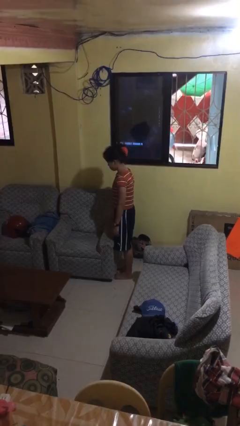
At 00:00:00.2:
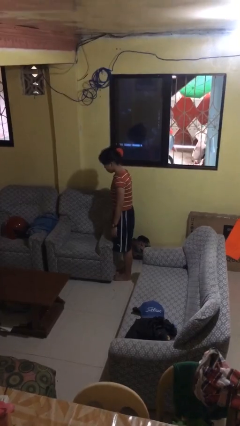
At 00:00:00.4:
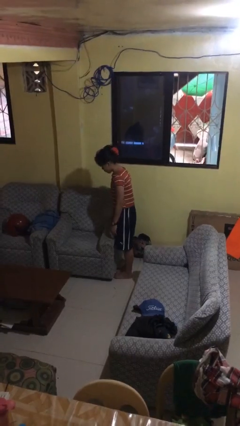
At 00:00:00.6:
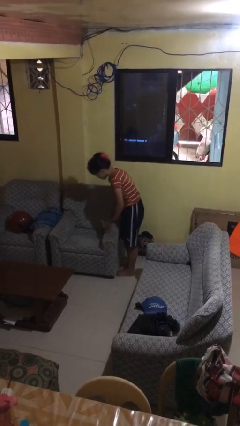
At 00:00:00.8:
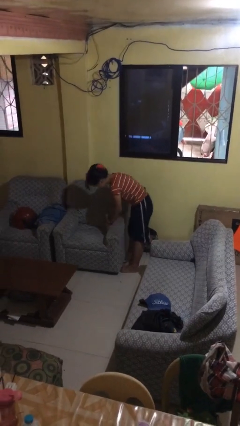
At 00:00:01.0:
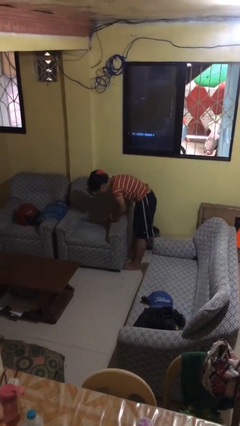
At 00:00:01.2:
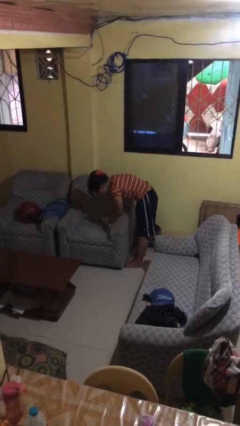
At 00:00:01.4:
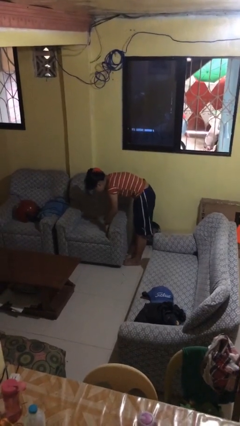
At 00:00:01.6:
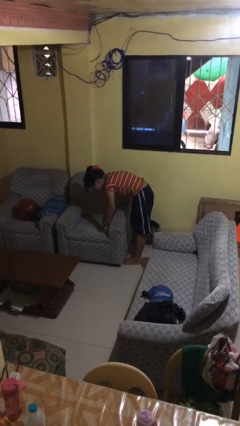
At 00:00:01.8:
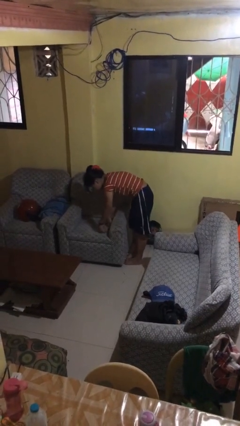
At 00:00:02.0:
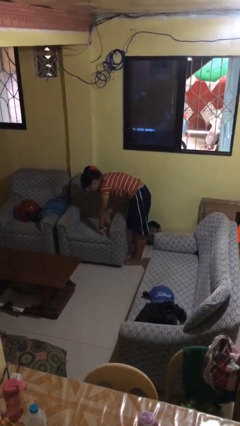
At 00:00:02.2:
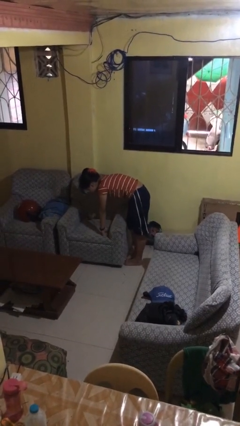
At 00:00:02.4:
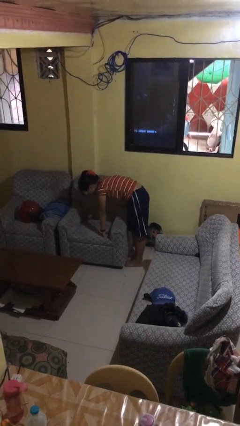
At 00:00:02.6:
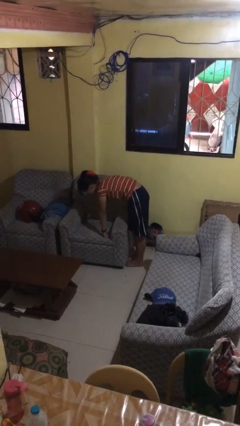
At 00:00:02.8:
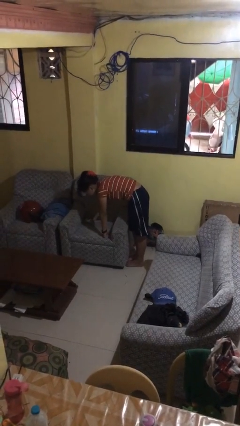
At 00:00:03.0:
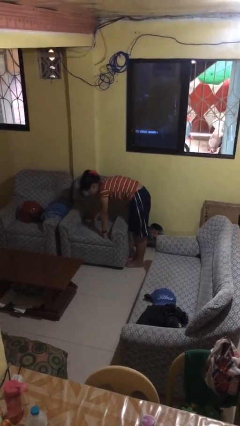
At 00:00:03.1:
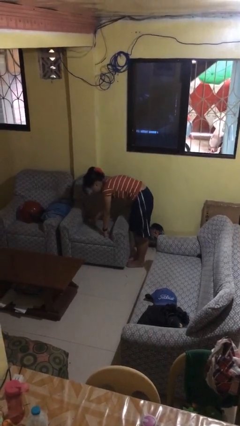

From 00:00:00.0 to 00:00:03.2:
person searches in couch

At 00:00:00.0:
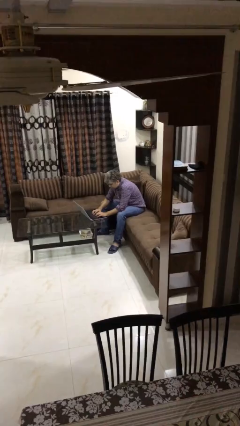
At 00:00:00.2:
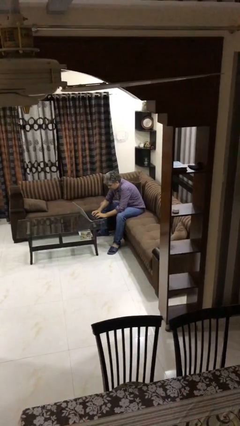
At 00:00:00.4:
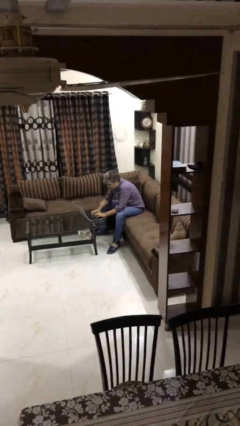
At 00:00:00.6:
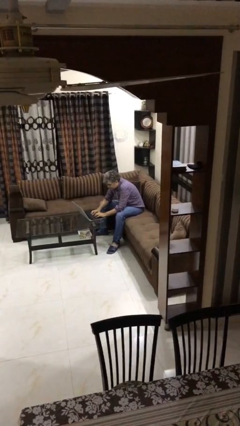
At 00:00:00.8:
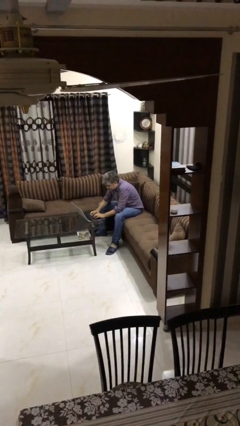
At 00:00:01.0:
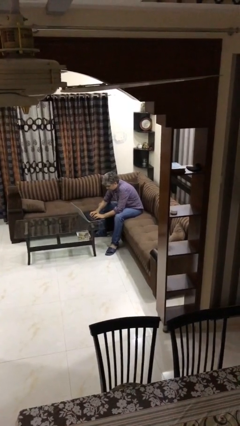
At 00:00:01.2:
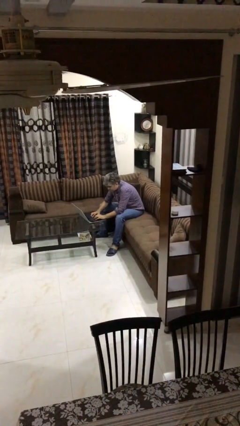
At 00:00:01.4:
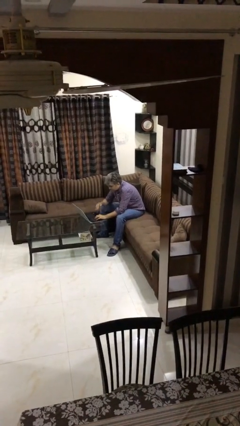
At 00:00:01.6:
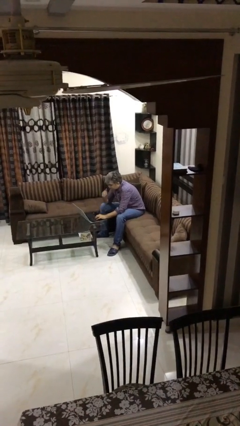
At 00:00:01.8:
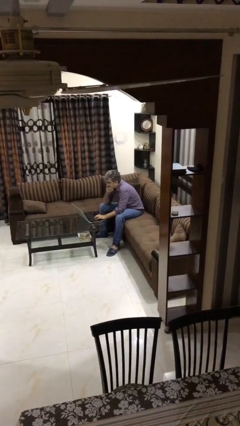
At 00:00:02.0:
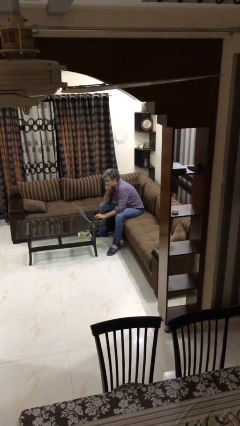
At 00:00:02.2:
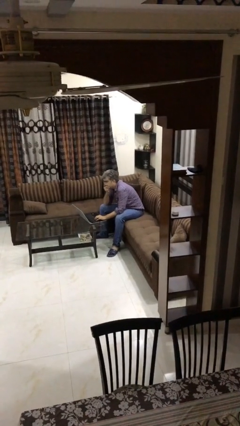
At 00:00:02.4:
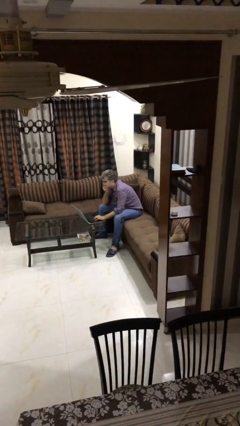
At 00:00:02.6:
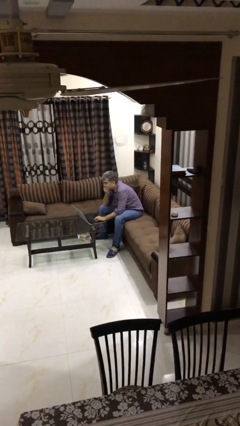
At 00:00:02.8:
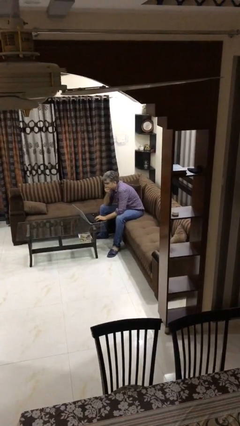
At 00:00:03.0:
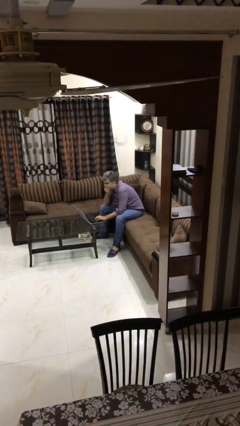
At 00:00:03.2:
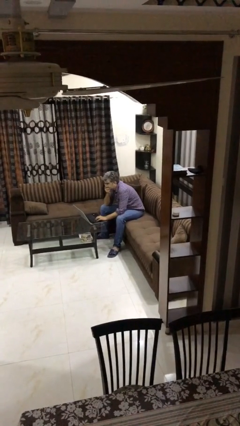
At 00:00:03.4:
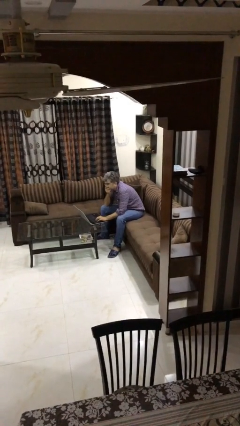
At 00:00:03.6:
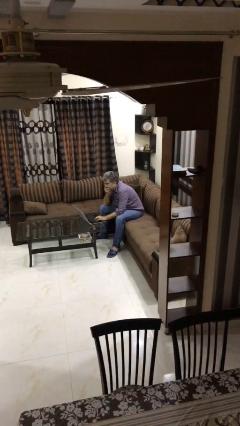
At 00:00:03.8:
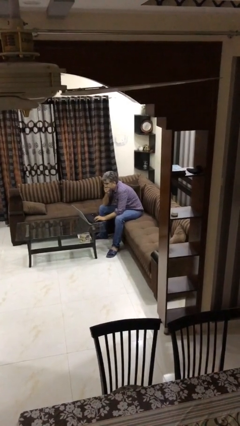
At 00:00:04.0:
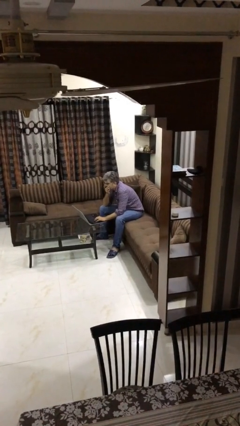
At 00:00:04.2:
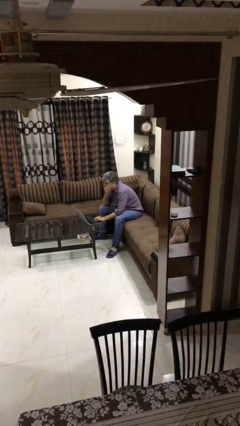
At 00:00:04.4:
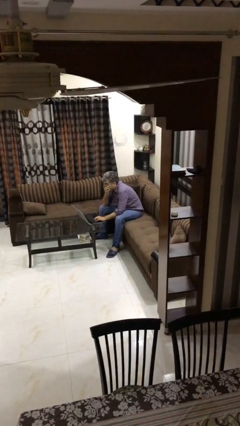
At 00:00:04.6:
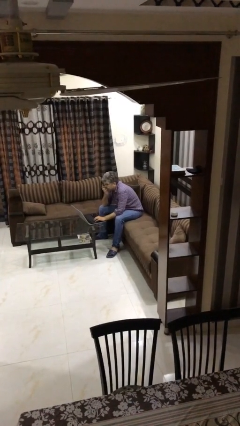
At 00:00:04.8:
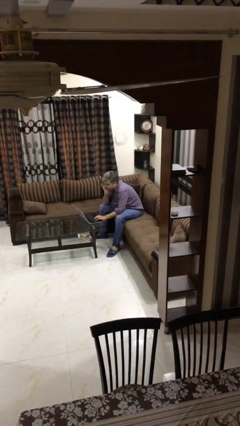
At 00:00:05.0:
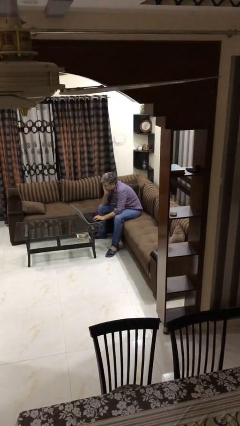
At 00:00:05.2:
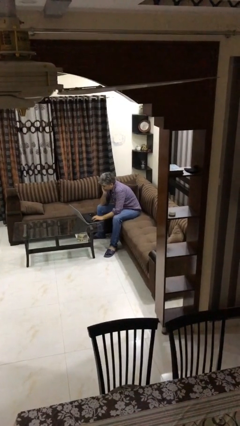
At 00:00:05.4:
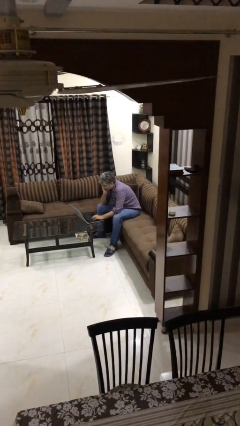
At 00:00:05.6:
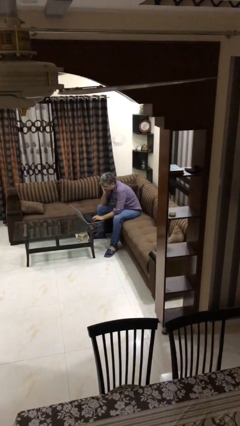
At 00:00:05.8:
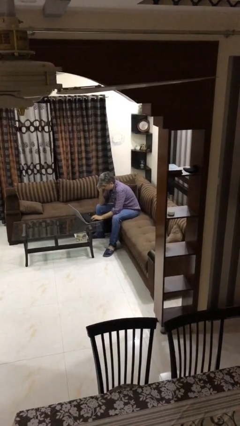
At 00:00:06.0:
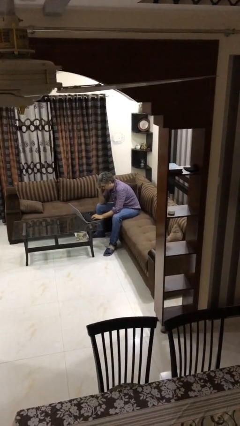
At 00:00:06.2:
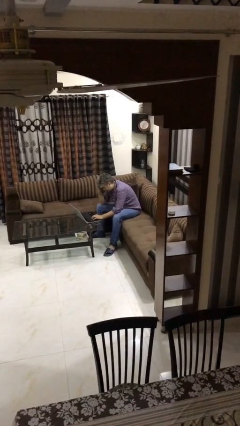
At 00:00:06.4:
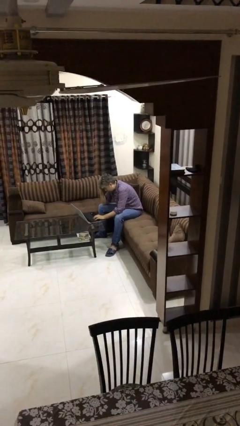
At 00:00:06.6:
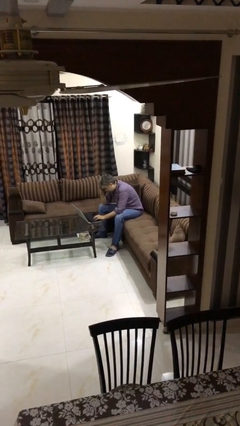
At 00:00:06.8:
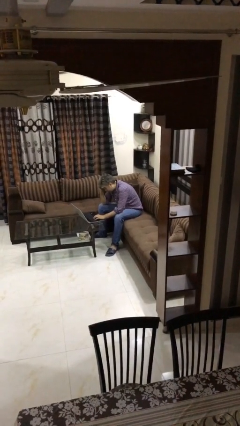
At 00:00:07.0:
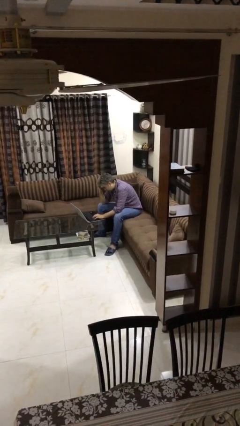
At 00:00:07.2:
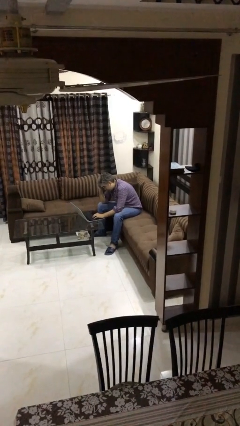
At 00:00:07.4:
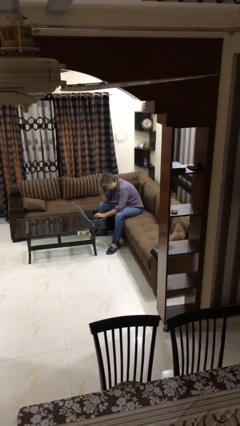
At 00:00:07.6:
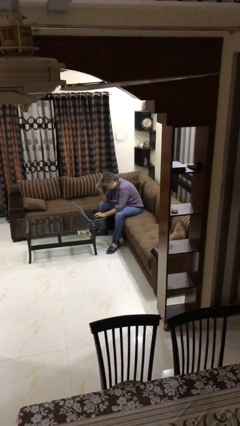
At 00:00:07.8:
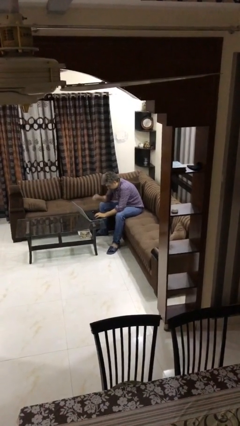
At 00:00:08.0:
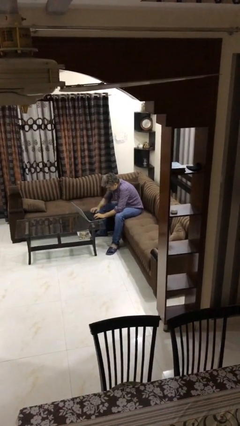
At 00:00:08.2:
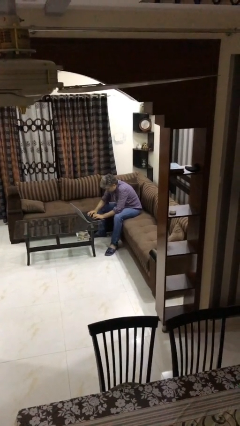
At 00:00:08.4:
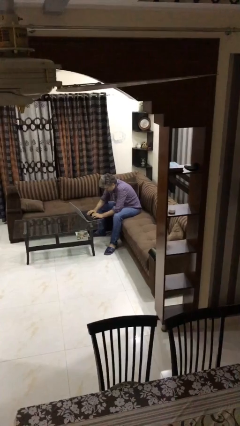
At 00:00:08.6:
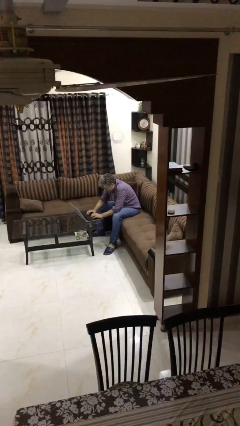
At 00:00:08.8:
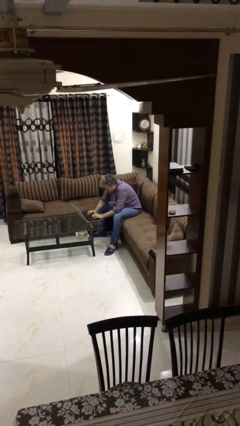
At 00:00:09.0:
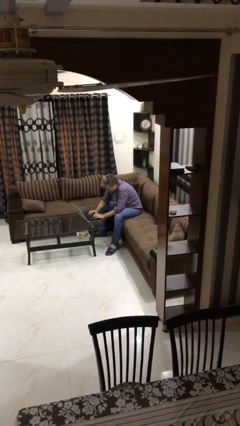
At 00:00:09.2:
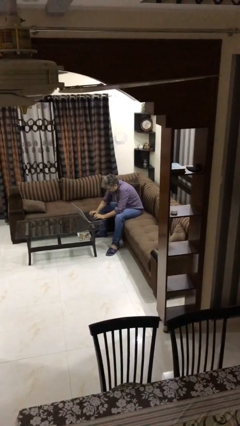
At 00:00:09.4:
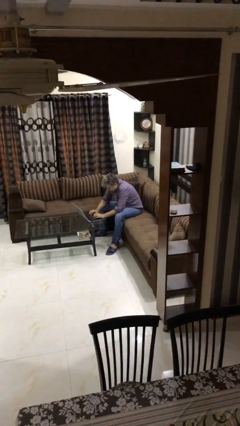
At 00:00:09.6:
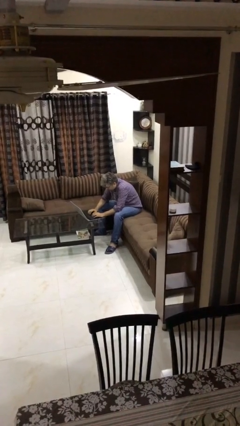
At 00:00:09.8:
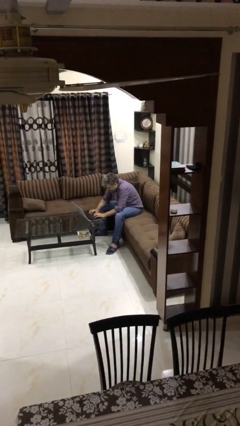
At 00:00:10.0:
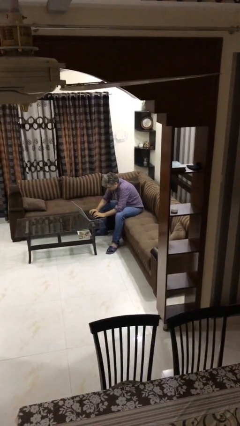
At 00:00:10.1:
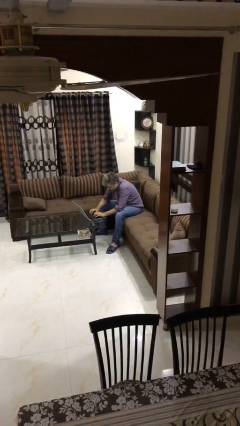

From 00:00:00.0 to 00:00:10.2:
person interacts with laptop

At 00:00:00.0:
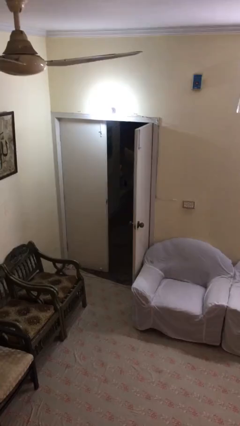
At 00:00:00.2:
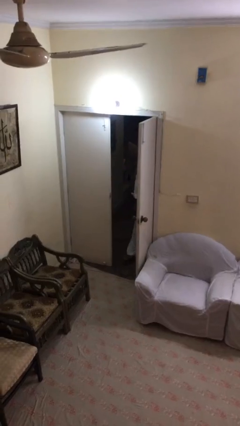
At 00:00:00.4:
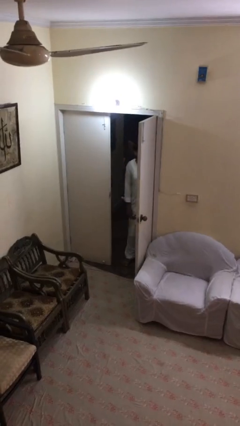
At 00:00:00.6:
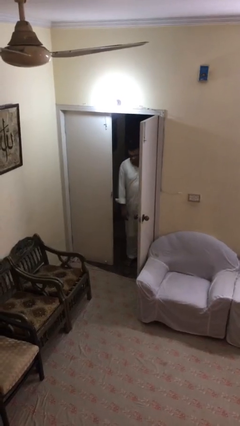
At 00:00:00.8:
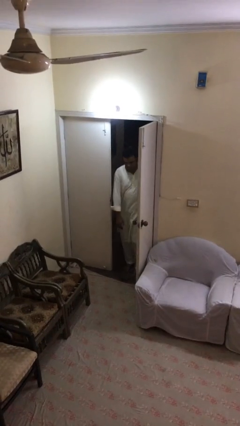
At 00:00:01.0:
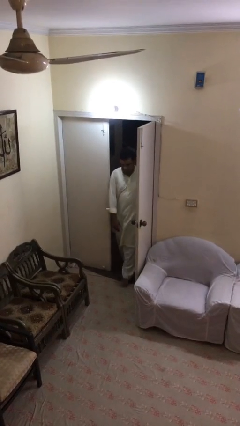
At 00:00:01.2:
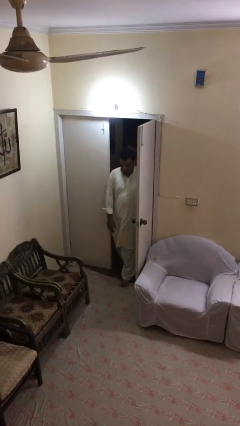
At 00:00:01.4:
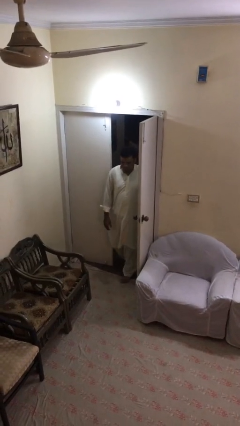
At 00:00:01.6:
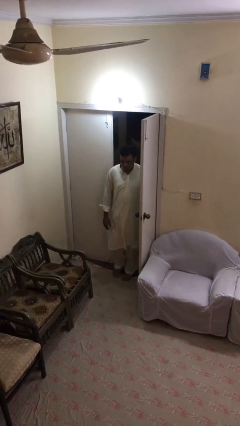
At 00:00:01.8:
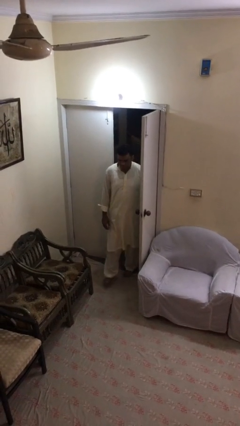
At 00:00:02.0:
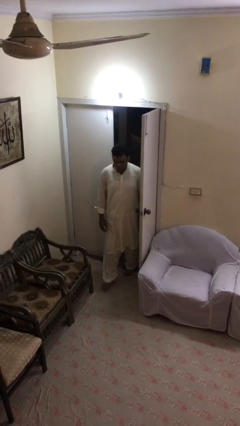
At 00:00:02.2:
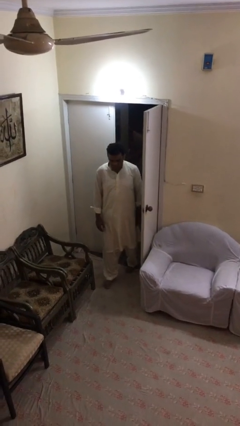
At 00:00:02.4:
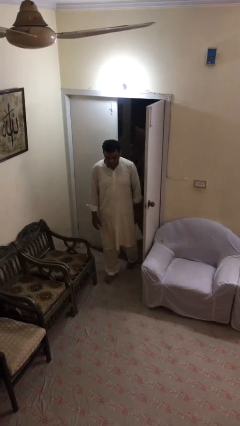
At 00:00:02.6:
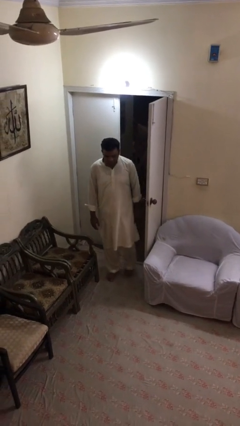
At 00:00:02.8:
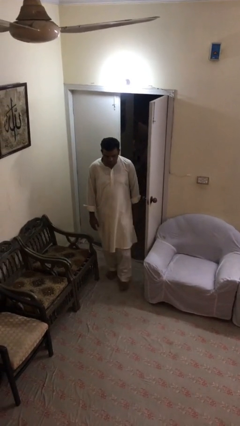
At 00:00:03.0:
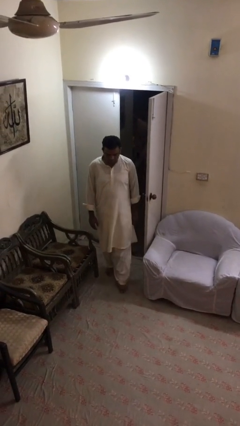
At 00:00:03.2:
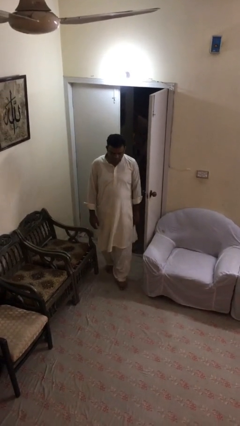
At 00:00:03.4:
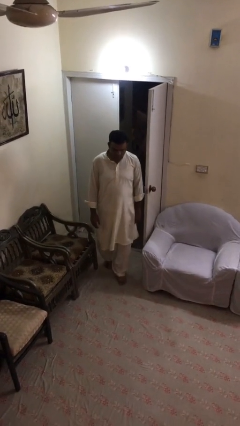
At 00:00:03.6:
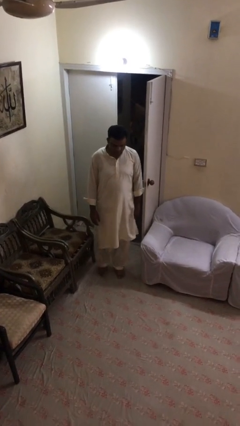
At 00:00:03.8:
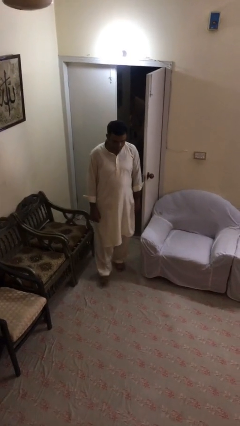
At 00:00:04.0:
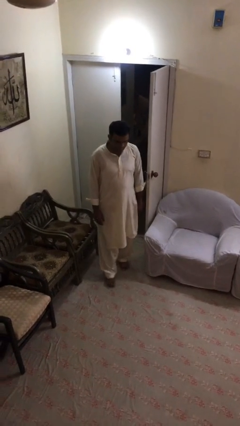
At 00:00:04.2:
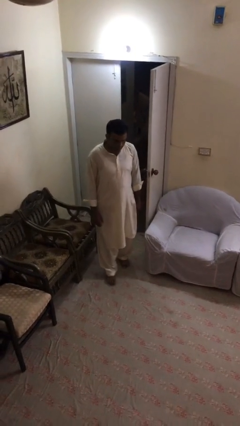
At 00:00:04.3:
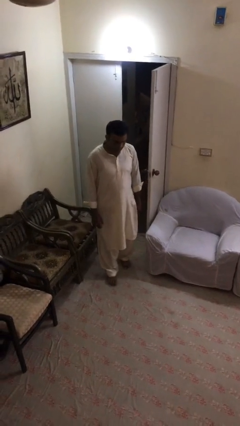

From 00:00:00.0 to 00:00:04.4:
person enters scene through structure
